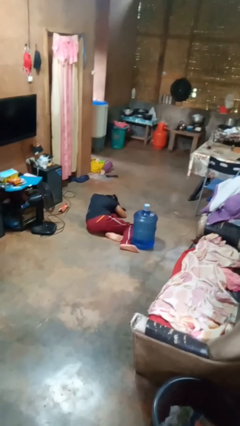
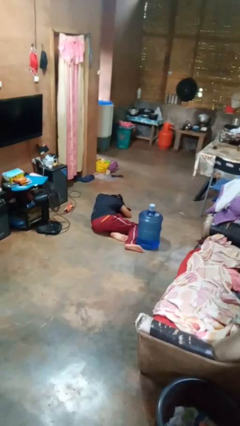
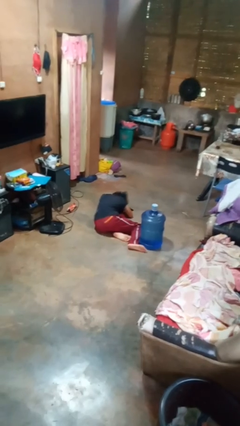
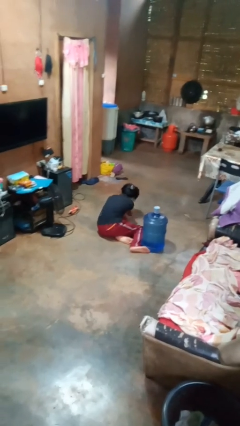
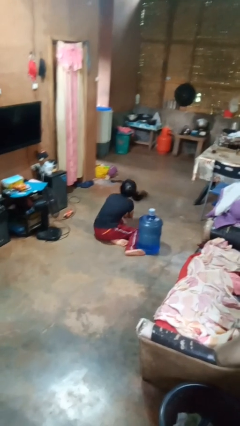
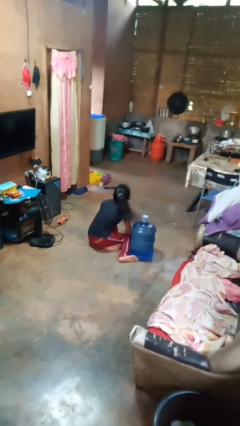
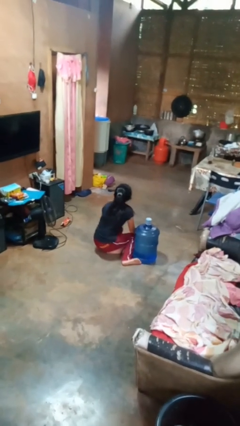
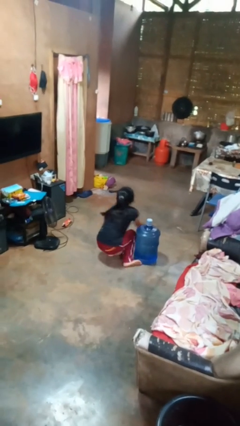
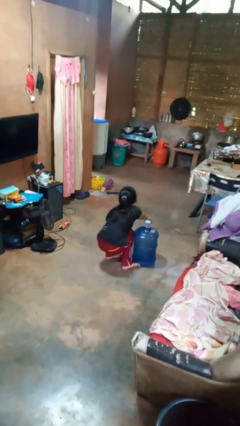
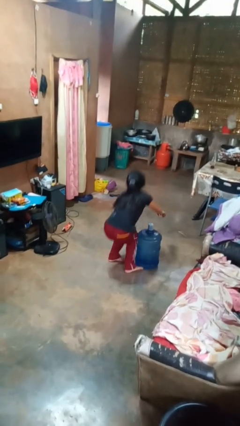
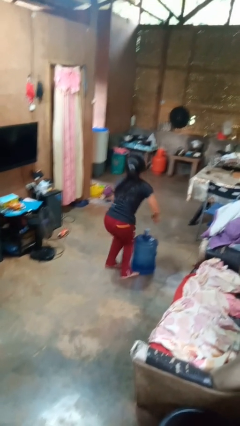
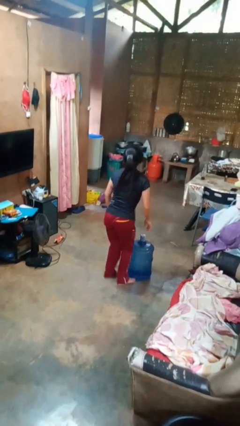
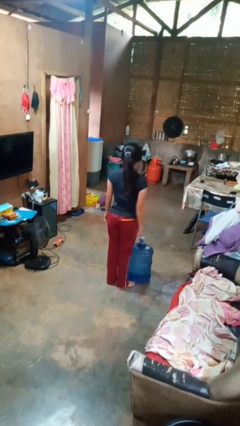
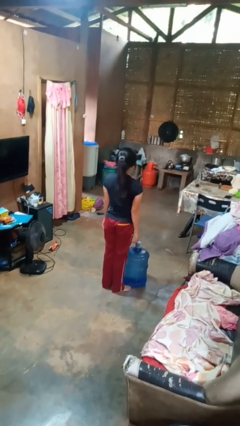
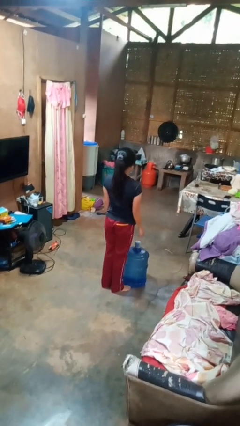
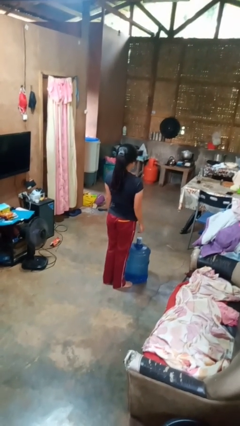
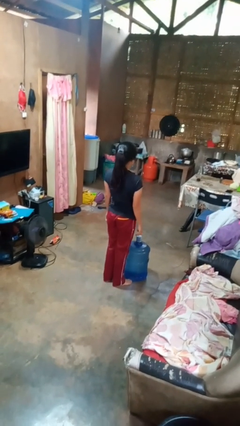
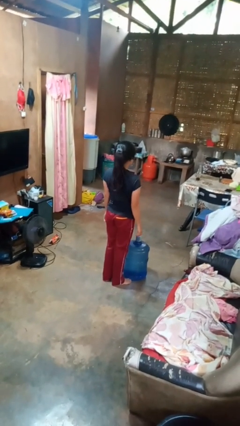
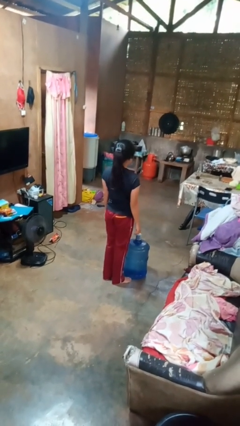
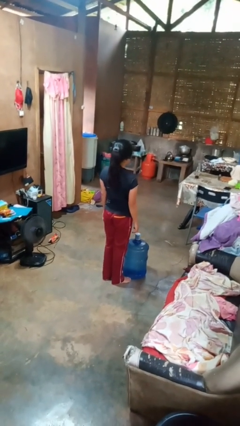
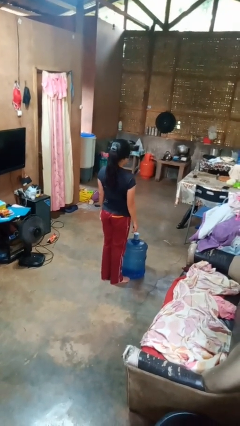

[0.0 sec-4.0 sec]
person stands up from floor

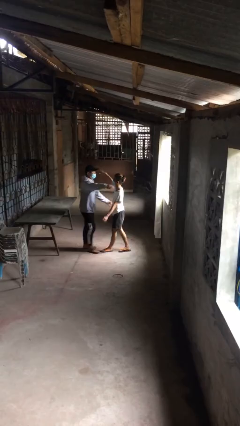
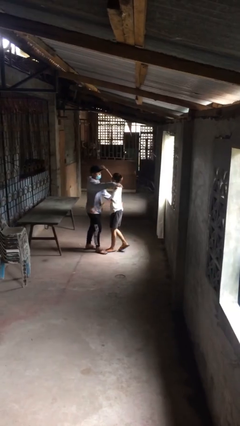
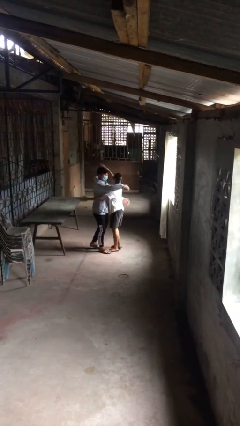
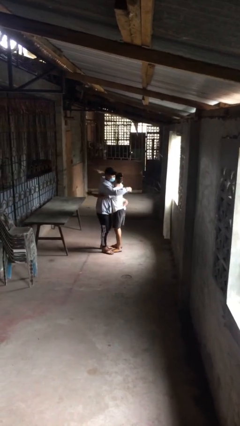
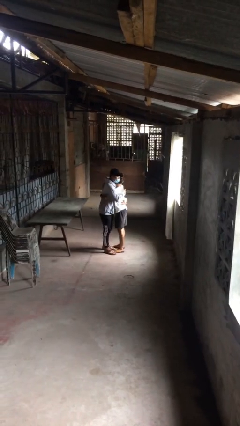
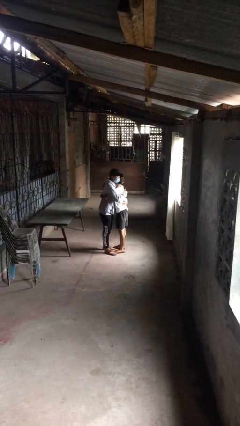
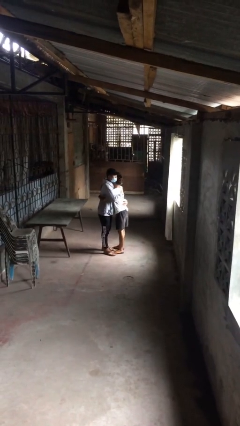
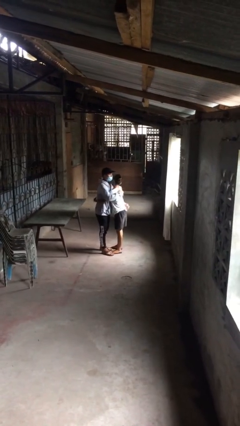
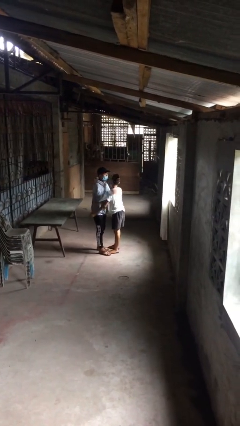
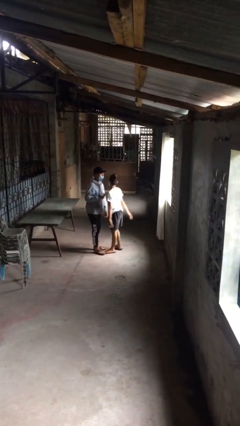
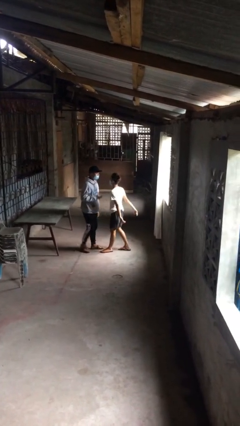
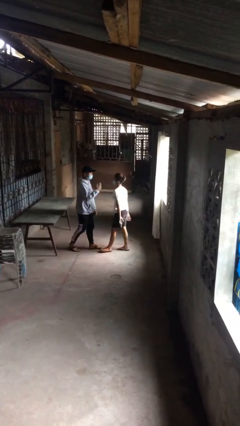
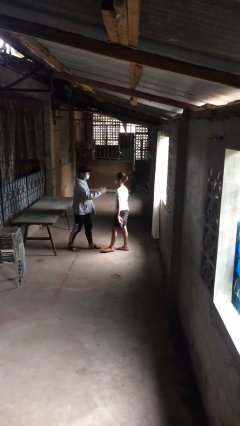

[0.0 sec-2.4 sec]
person embraces person

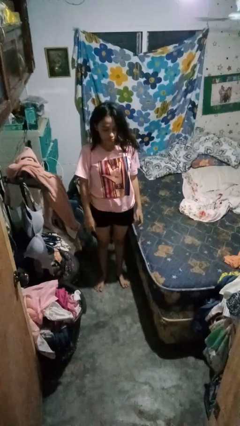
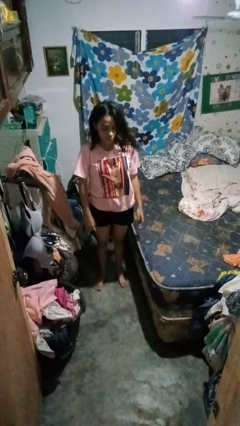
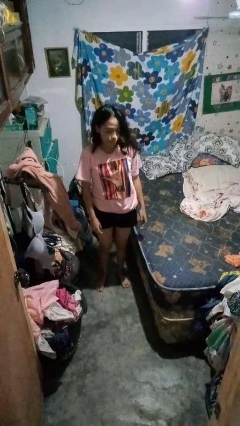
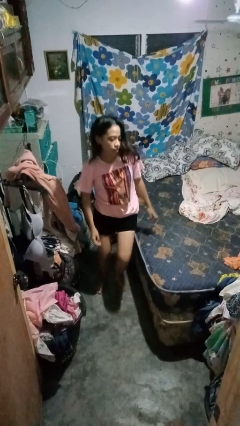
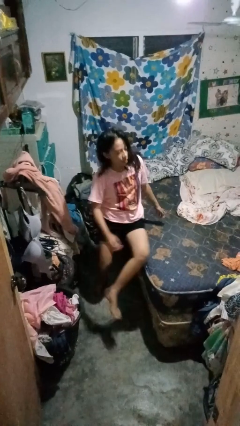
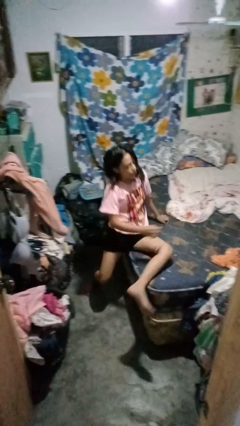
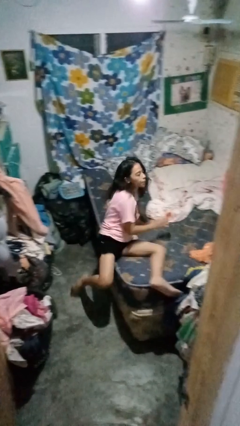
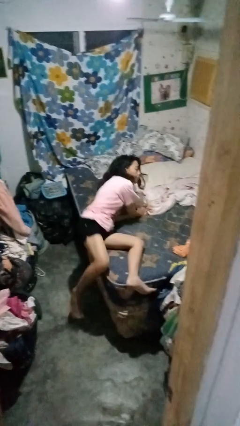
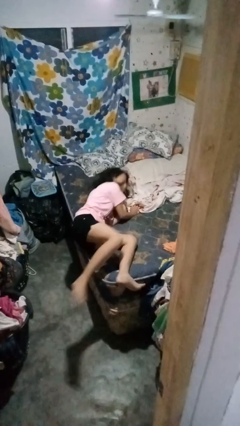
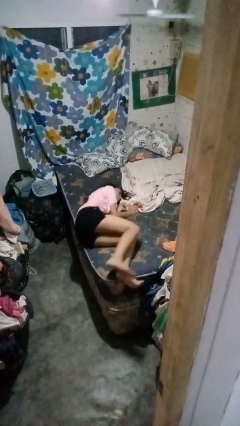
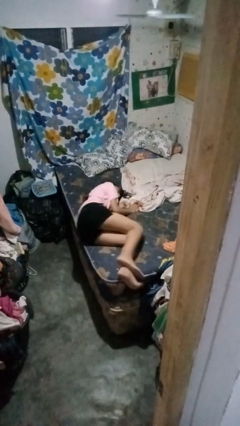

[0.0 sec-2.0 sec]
person lies down on bed

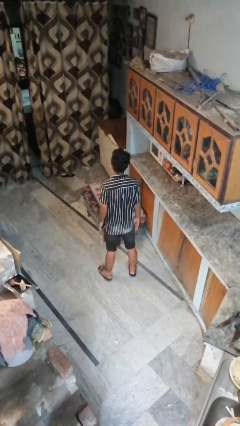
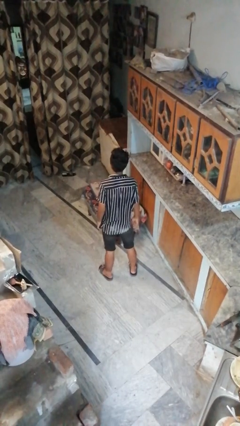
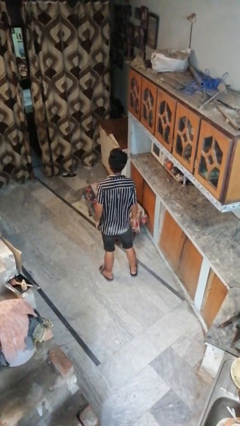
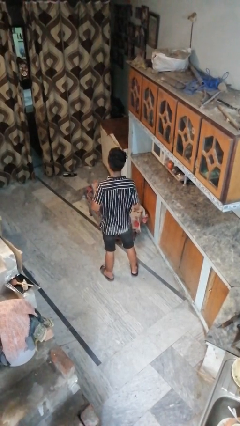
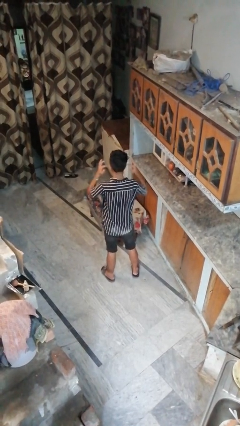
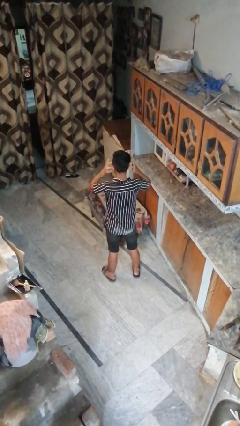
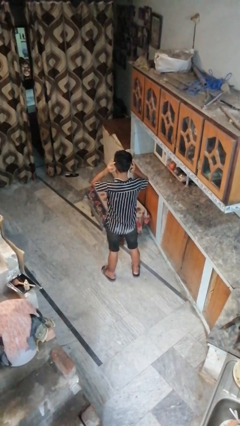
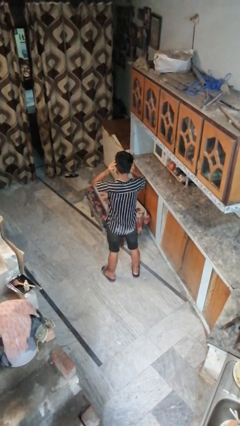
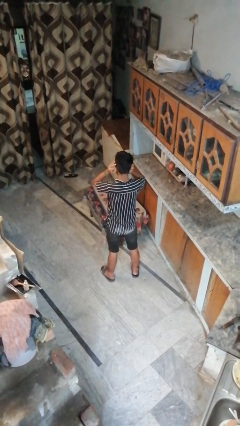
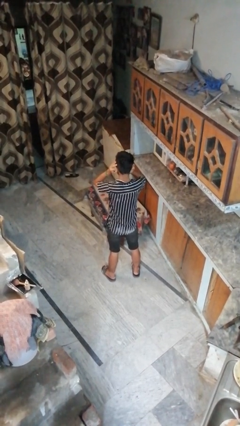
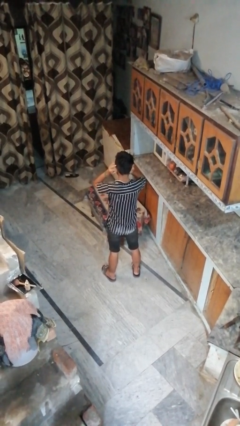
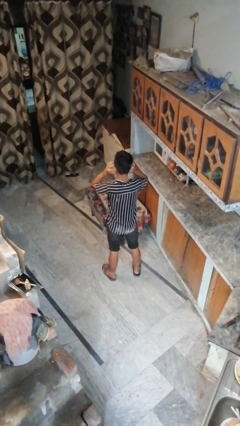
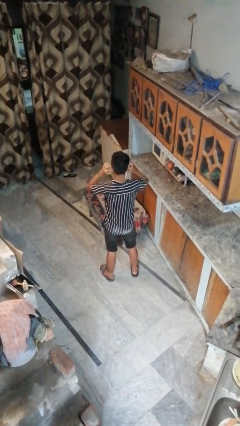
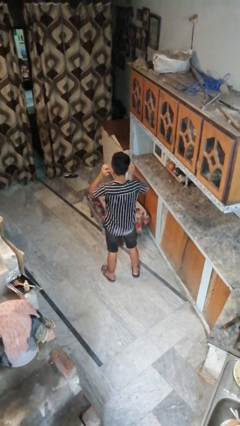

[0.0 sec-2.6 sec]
person puts fingers in ear

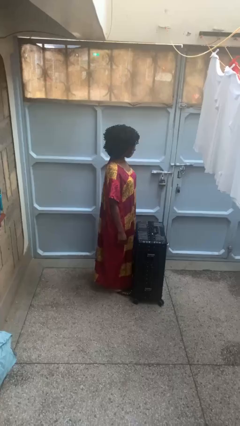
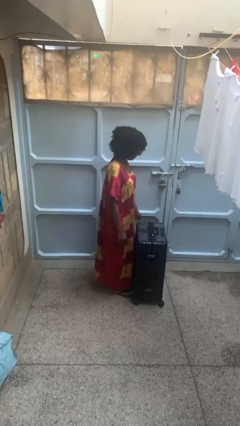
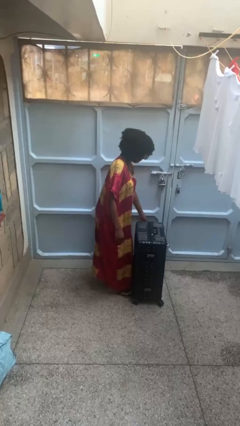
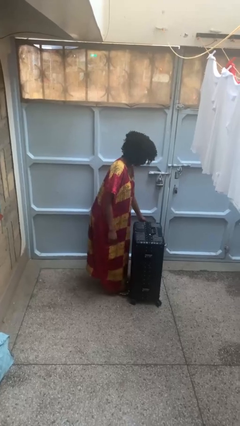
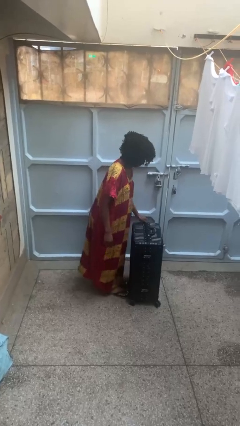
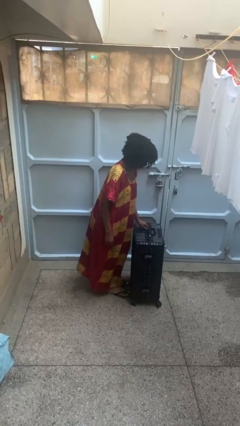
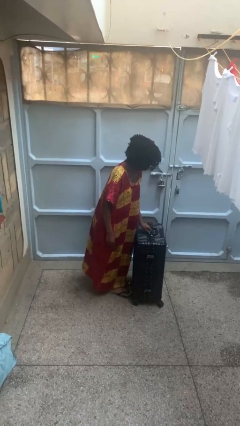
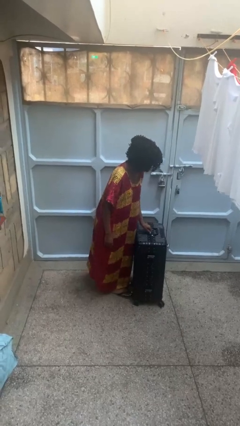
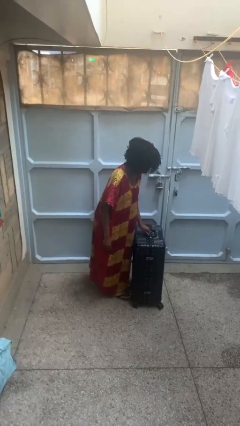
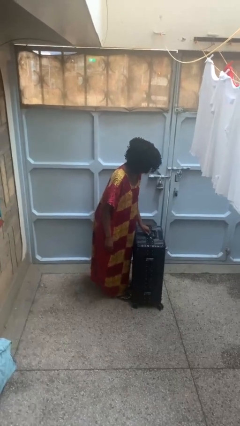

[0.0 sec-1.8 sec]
person opens suitcase

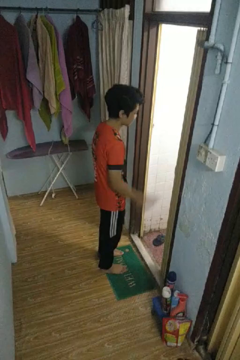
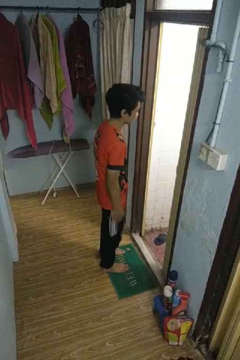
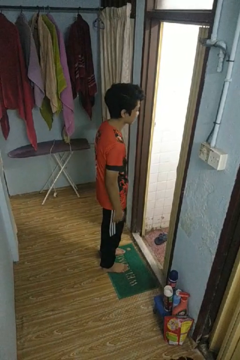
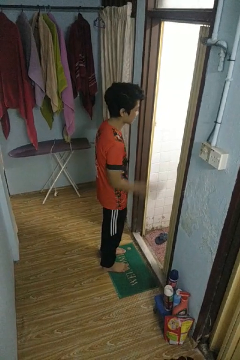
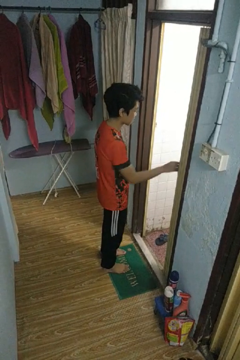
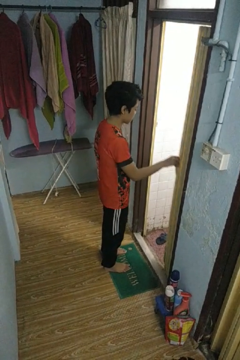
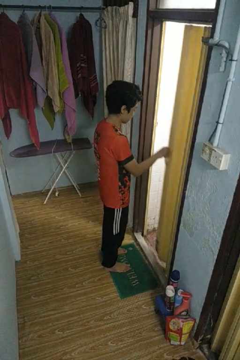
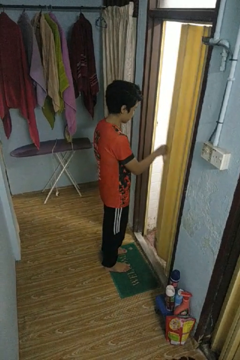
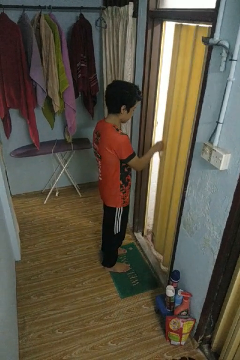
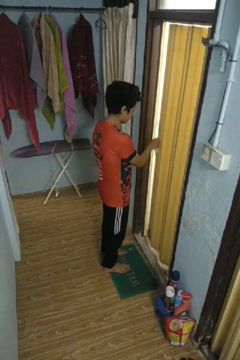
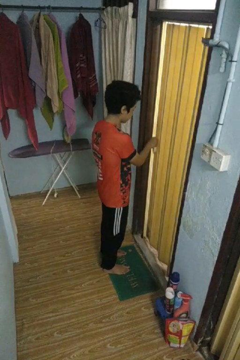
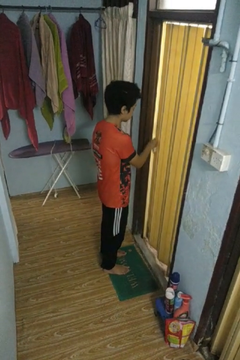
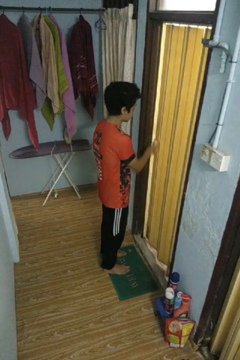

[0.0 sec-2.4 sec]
person closes sliding door

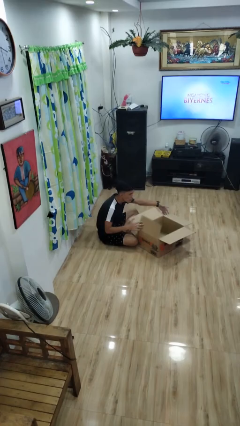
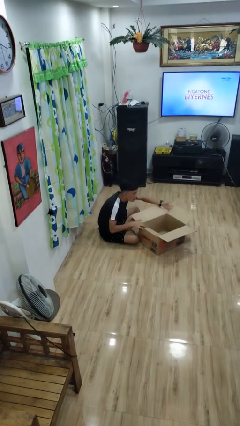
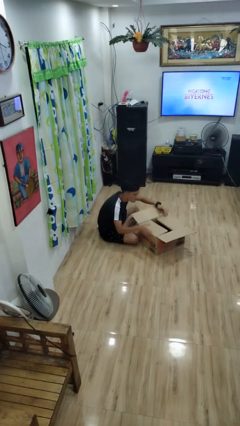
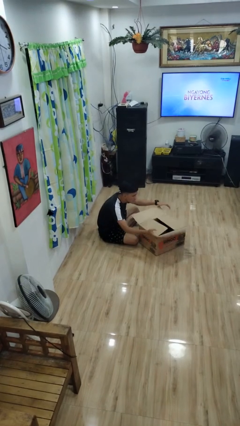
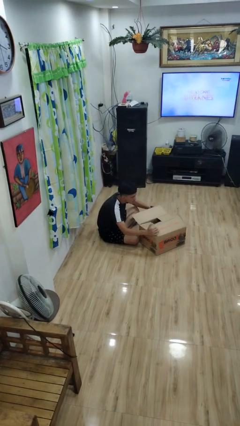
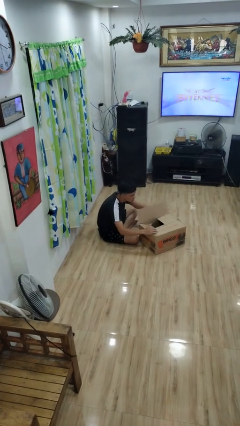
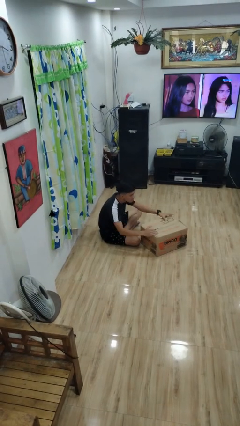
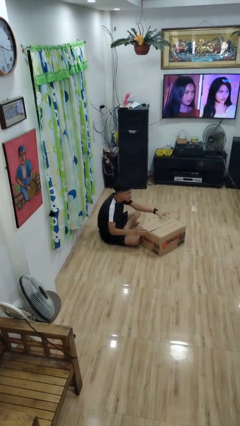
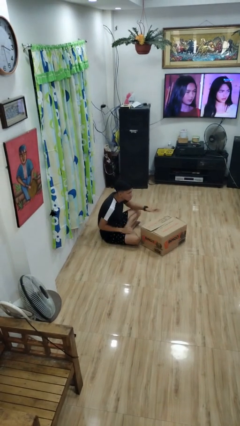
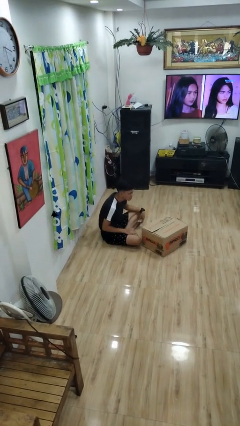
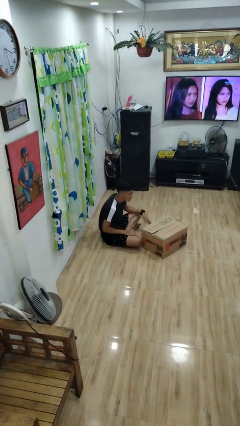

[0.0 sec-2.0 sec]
person closes box

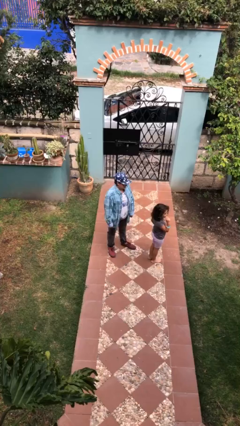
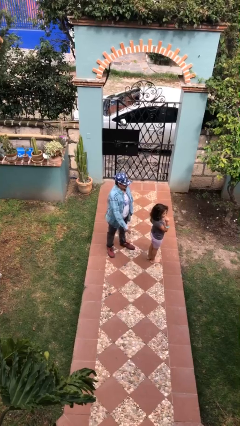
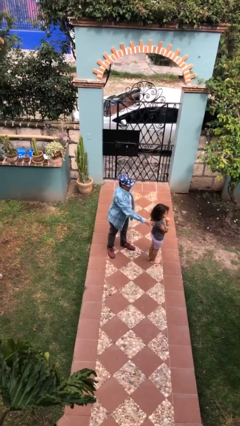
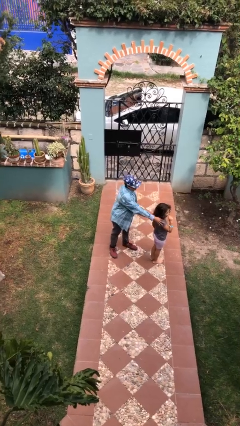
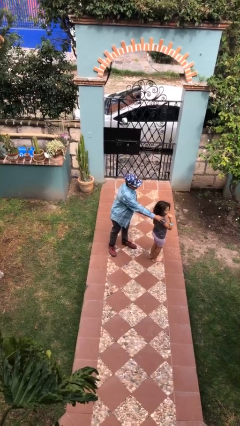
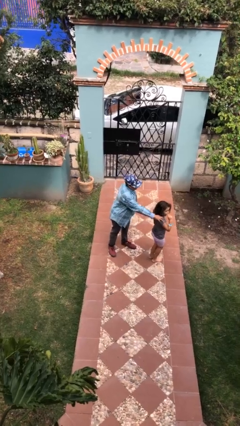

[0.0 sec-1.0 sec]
person grabs person by shoulder
